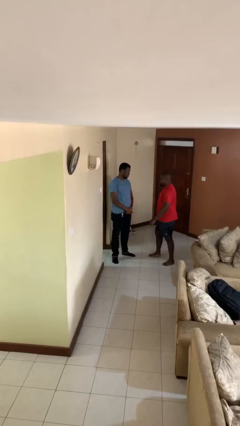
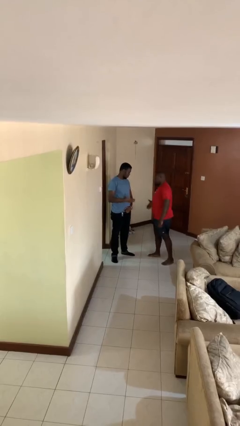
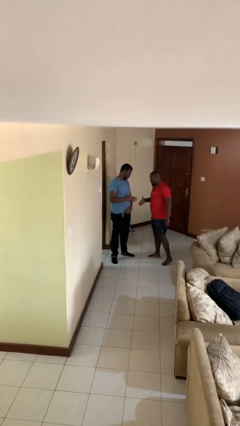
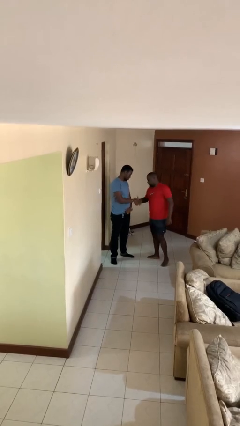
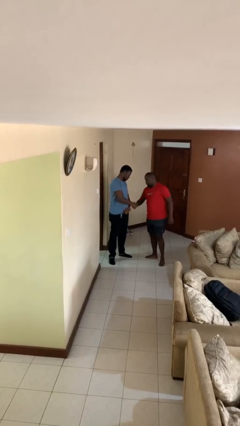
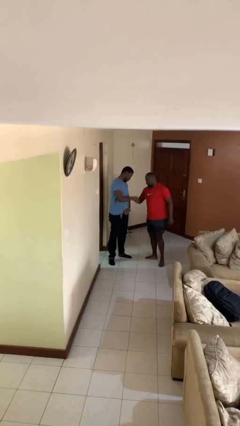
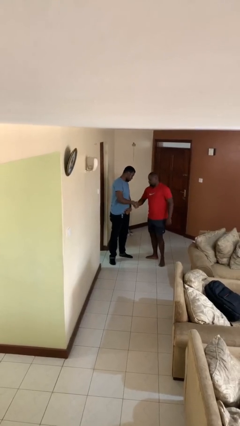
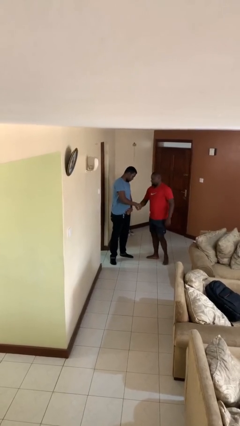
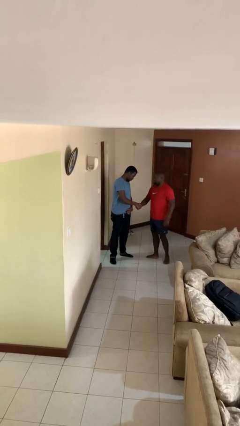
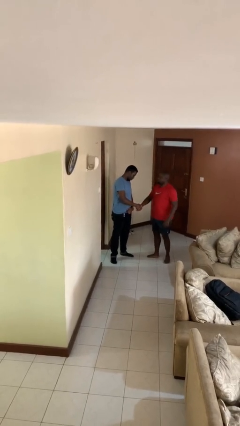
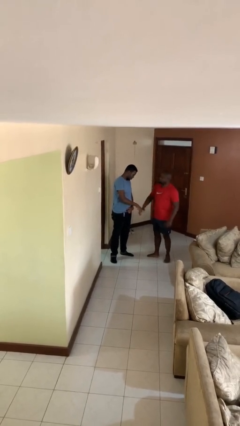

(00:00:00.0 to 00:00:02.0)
person shakes hand

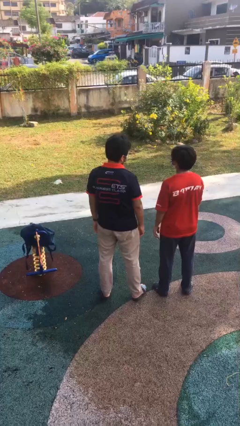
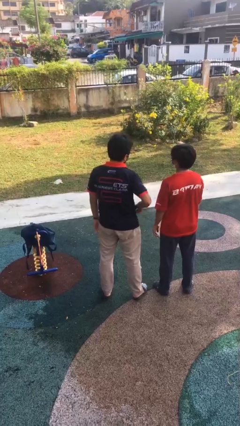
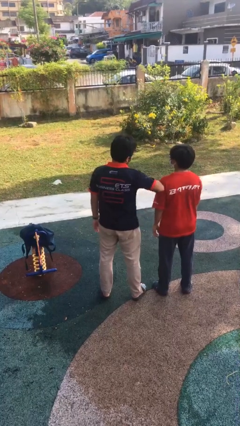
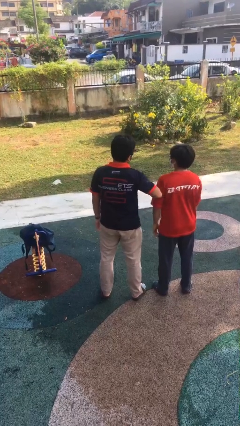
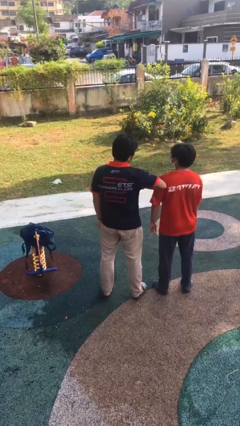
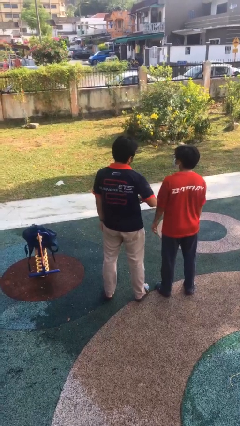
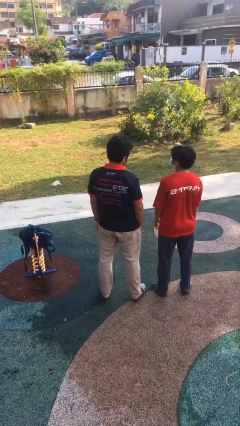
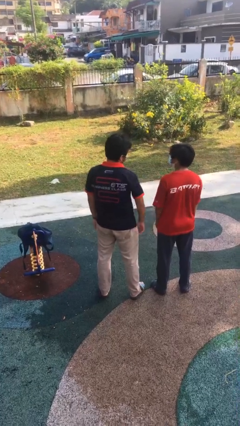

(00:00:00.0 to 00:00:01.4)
person nudges person with elbow

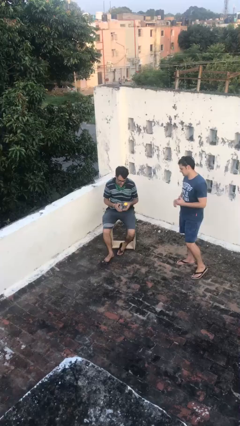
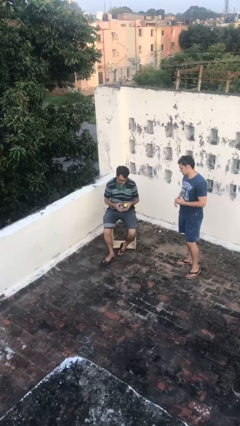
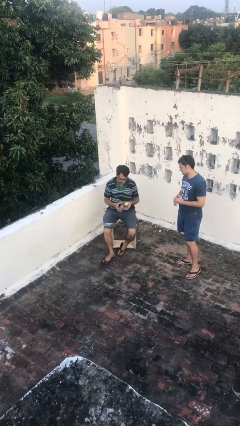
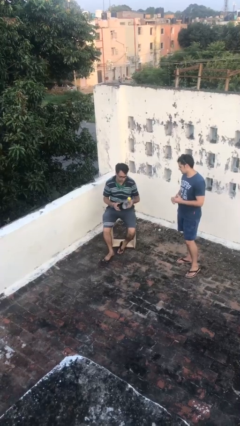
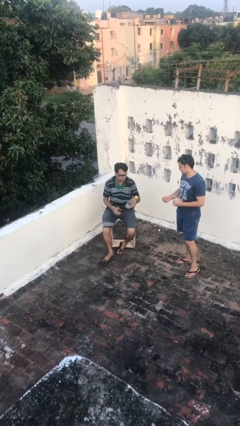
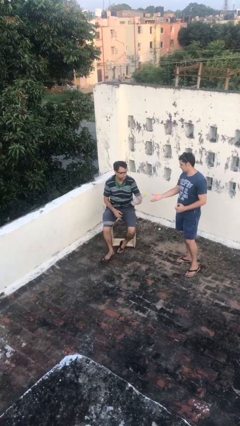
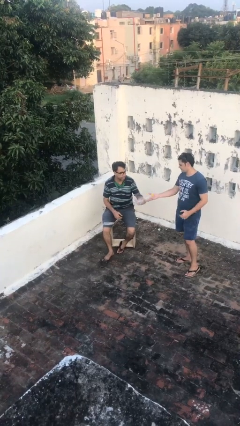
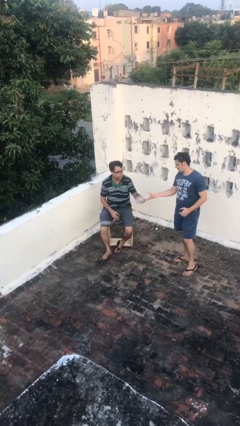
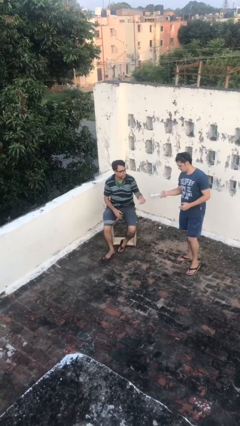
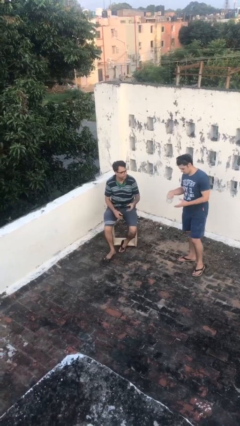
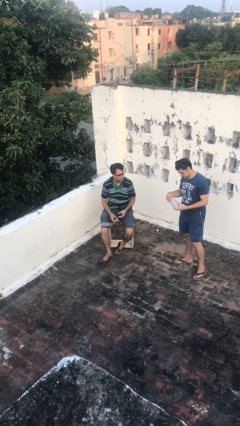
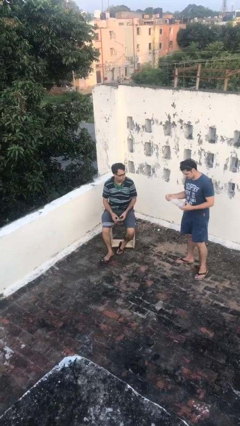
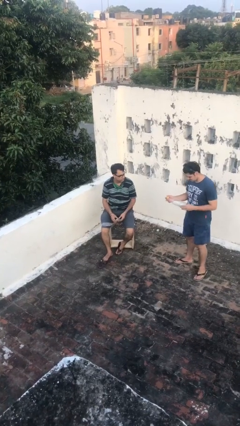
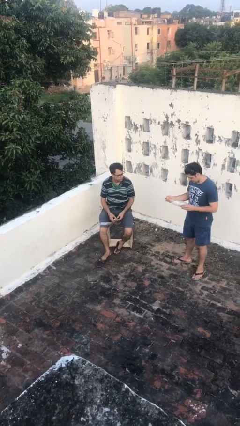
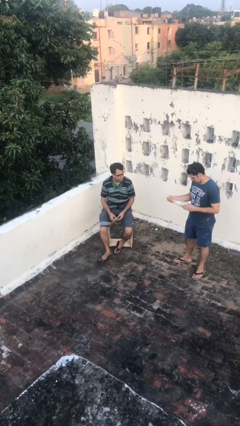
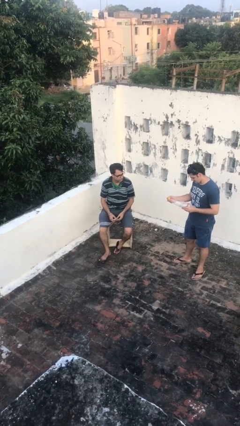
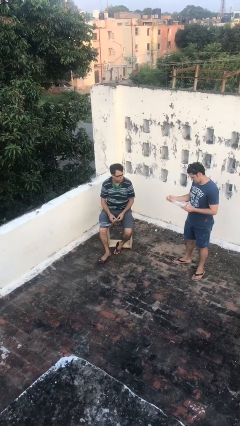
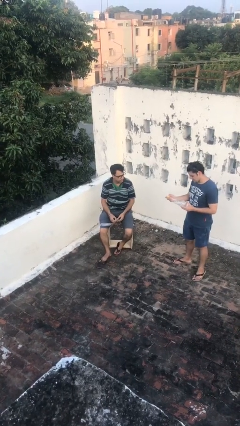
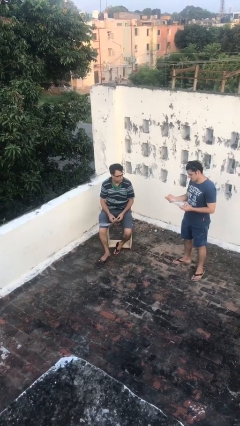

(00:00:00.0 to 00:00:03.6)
person transfers object to person

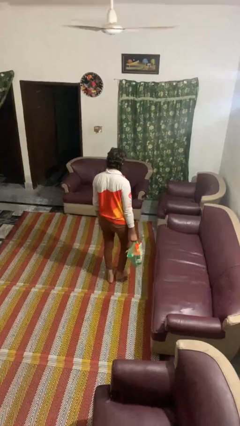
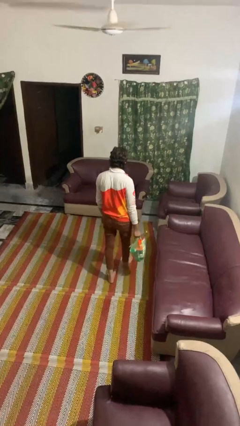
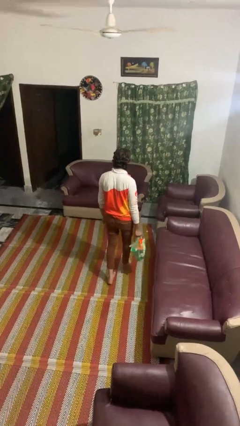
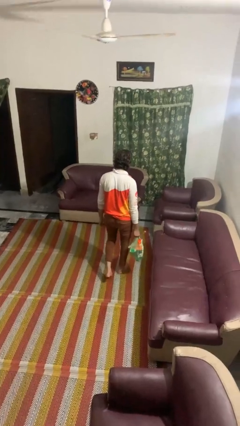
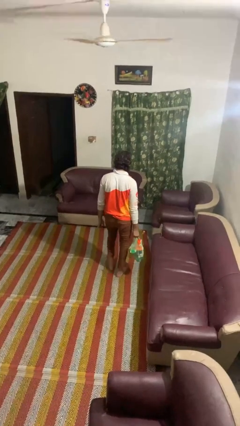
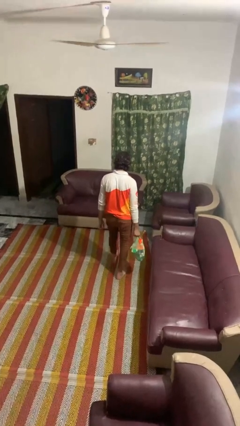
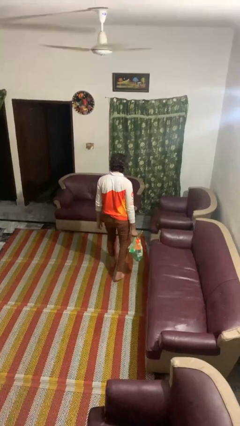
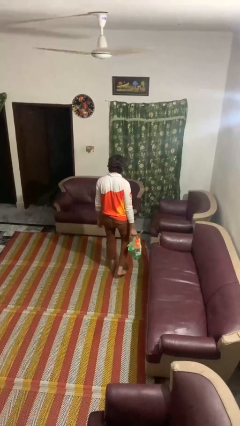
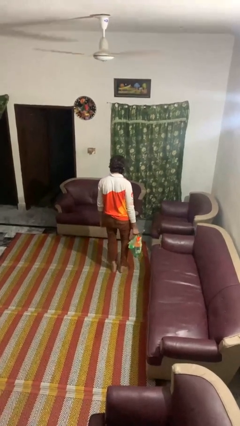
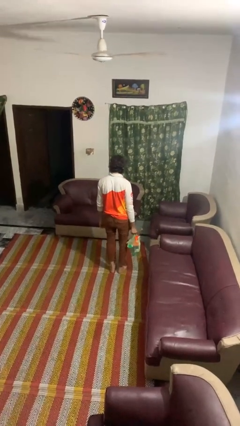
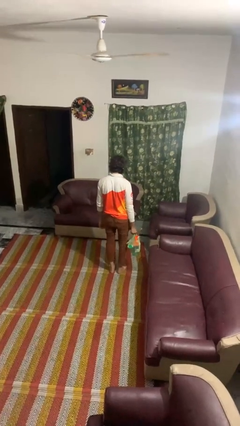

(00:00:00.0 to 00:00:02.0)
person carries groceries

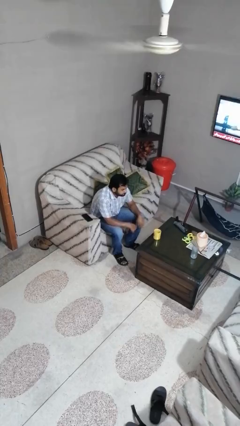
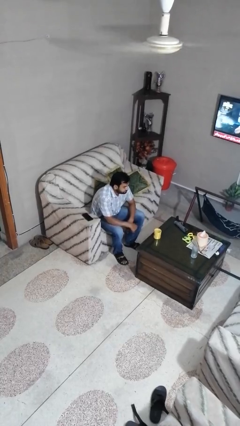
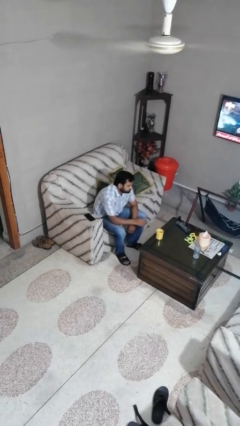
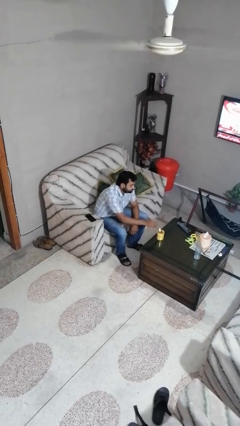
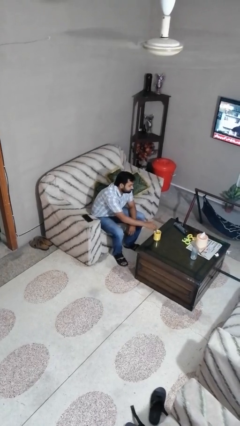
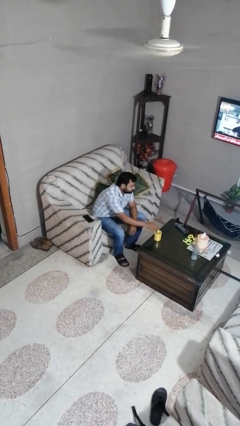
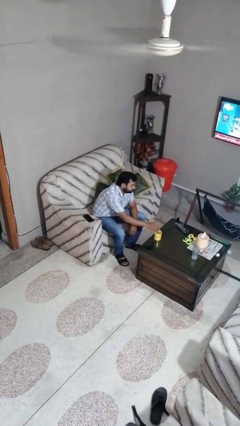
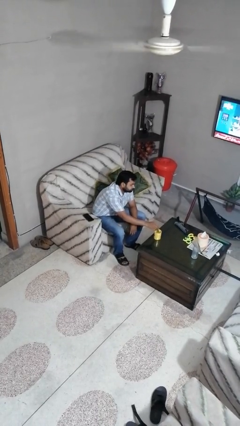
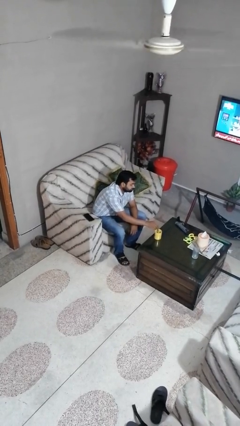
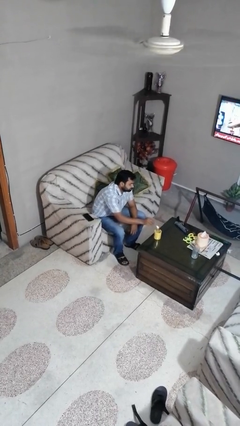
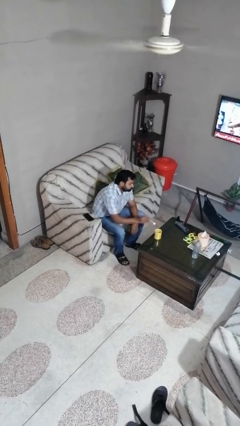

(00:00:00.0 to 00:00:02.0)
person stirs mug

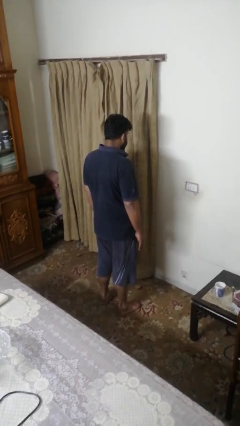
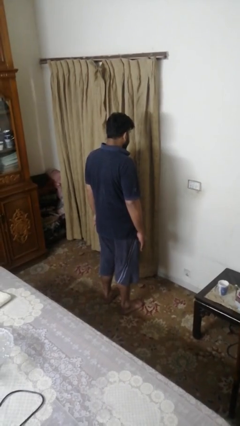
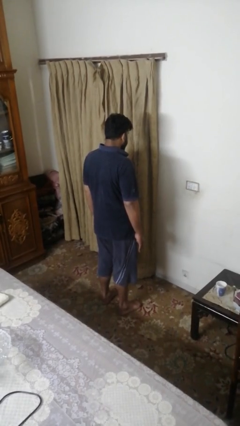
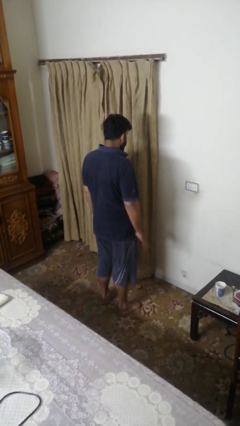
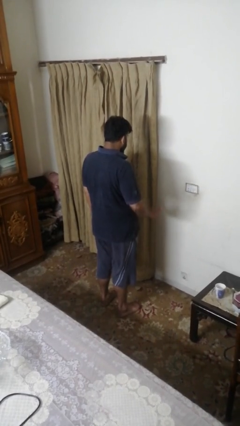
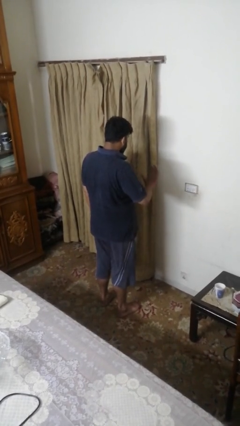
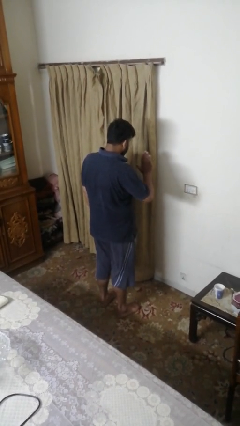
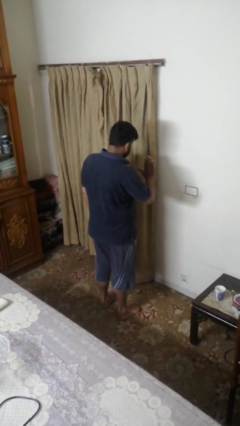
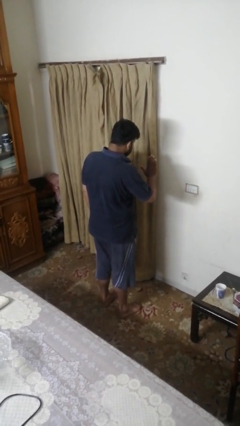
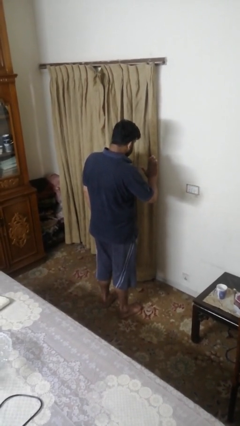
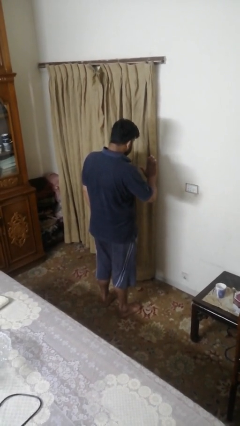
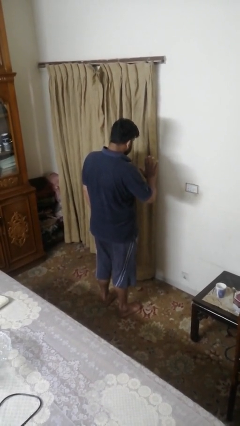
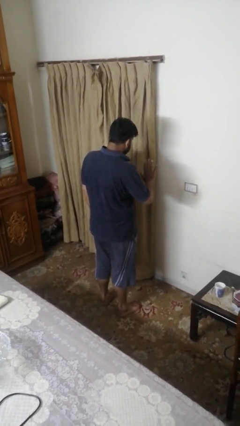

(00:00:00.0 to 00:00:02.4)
person gestures stop

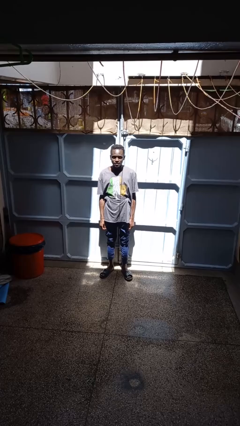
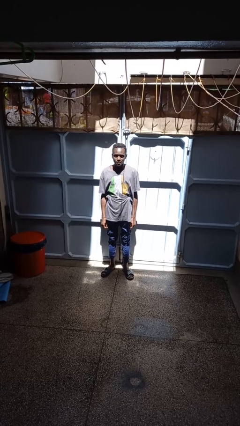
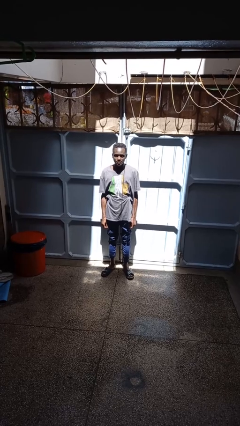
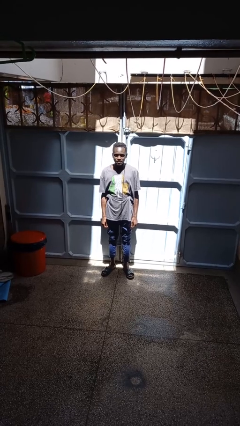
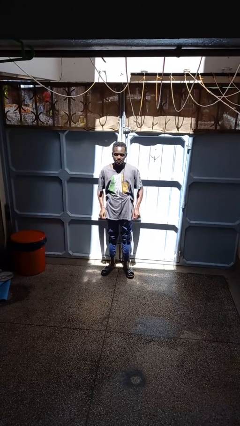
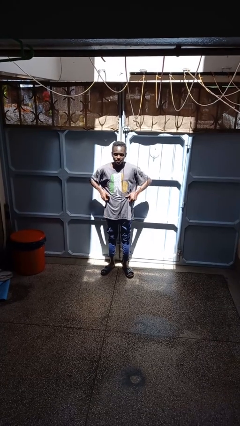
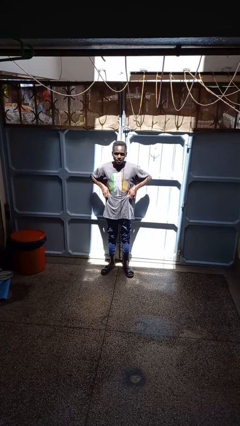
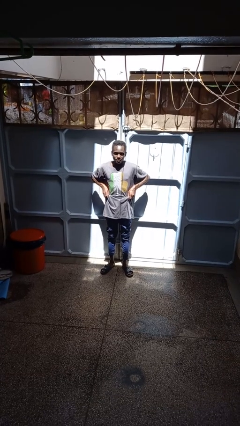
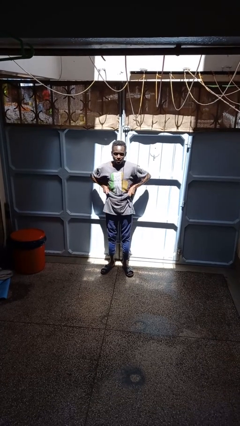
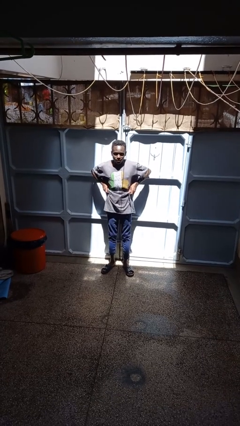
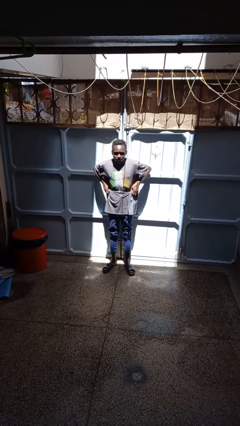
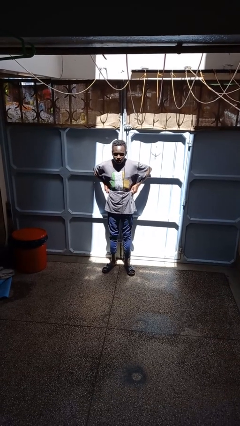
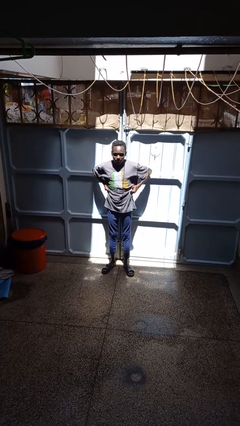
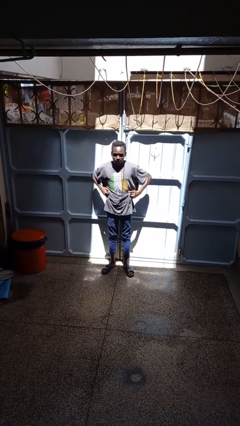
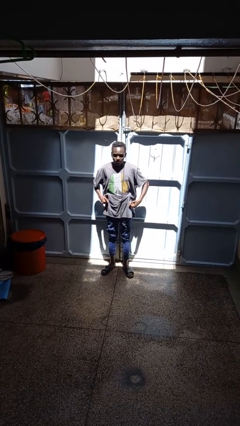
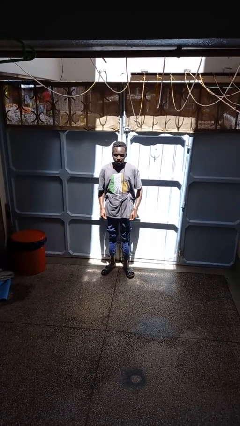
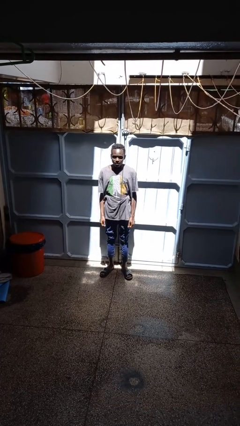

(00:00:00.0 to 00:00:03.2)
person hikes up pants

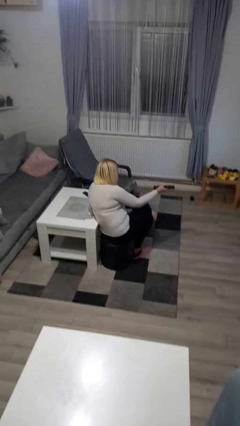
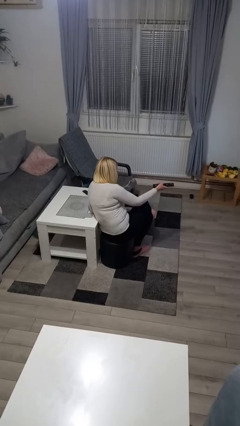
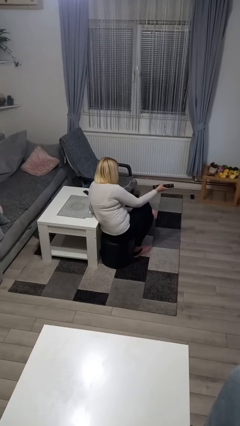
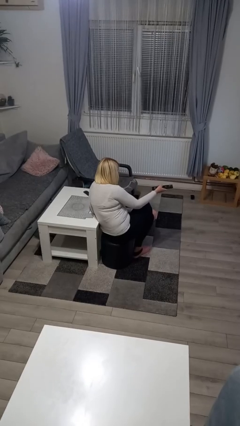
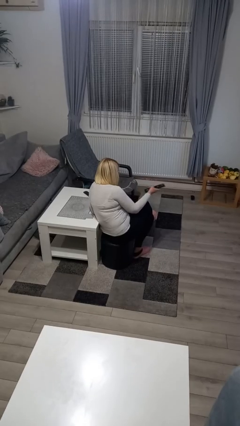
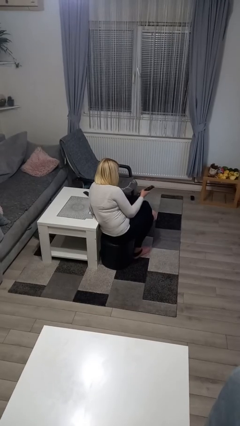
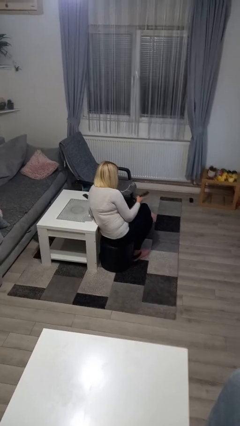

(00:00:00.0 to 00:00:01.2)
person uses television remote
